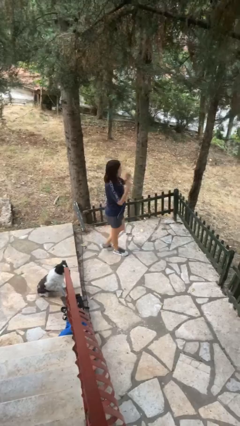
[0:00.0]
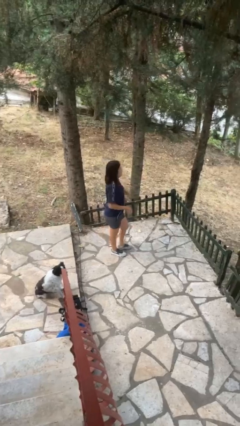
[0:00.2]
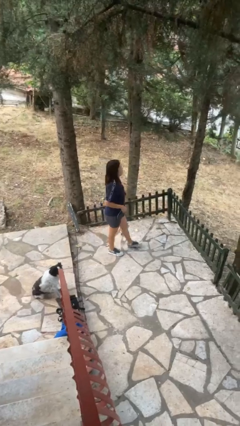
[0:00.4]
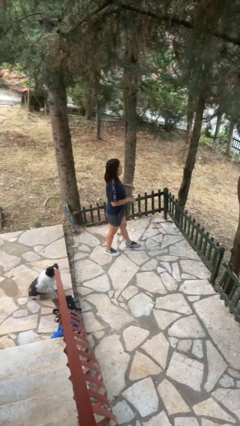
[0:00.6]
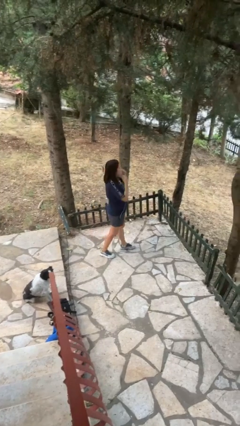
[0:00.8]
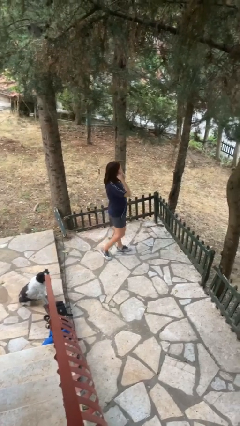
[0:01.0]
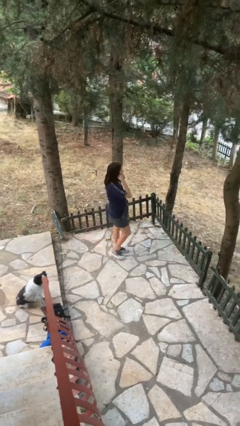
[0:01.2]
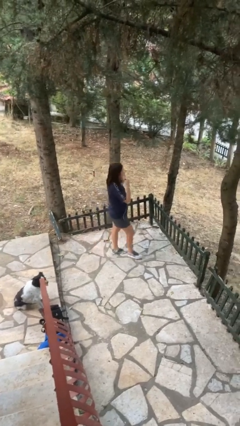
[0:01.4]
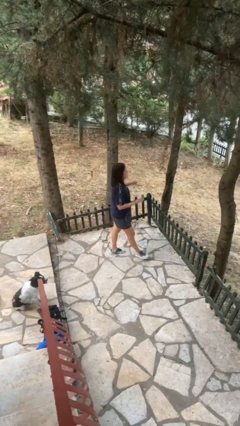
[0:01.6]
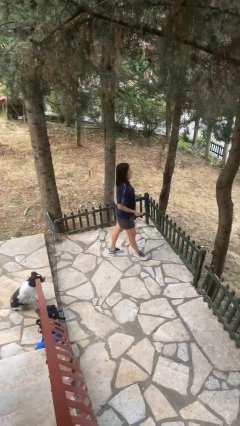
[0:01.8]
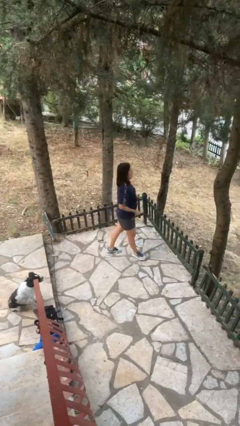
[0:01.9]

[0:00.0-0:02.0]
person takes off headphones

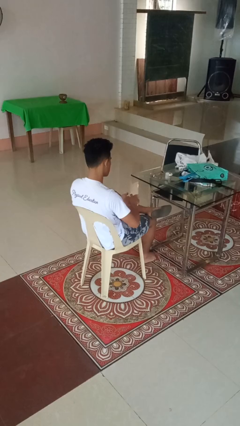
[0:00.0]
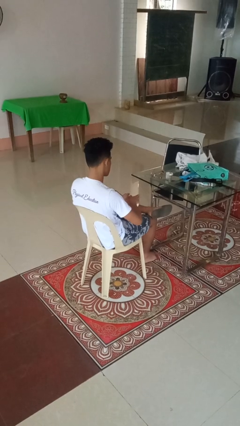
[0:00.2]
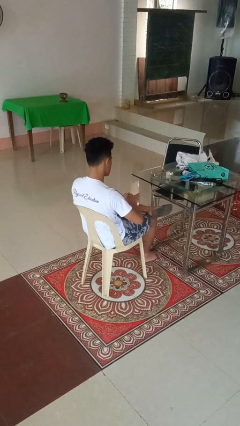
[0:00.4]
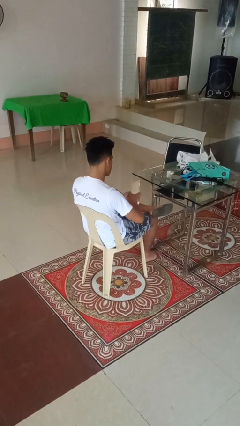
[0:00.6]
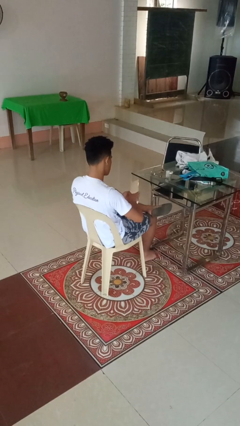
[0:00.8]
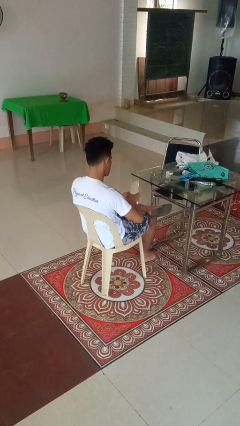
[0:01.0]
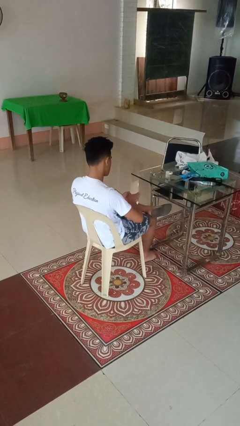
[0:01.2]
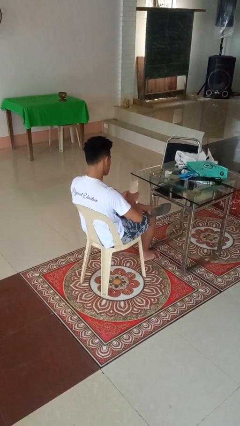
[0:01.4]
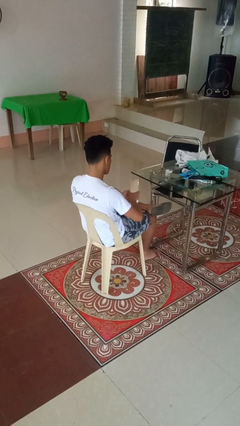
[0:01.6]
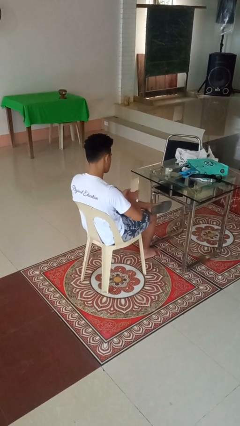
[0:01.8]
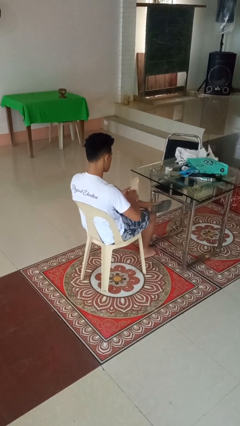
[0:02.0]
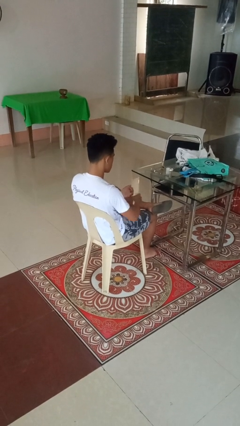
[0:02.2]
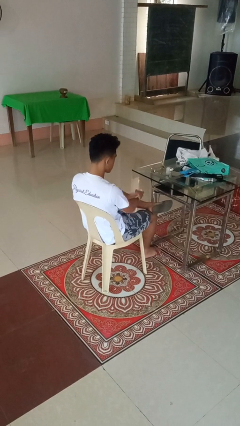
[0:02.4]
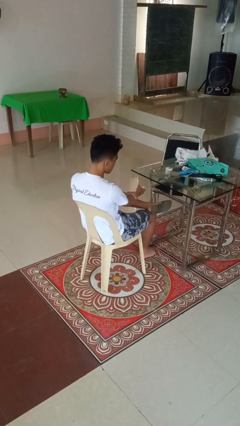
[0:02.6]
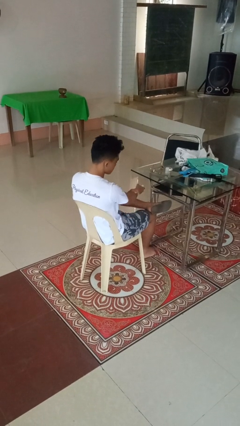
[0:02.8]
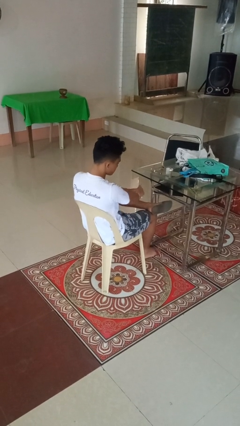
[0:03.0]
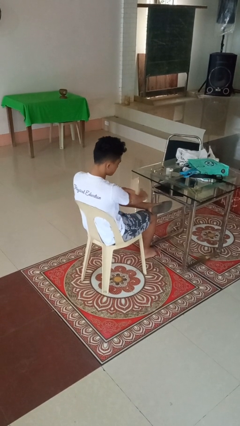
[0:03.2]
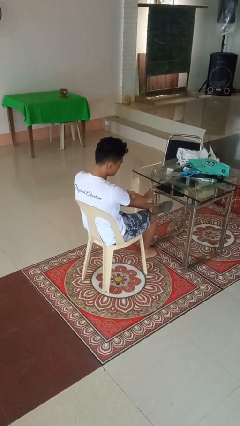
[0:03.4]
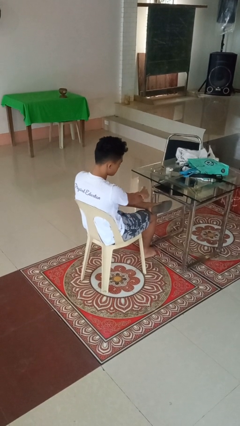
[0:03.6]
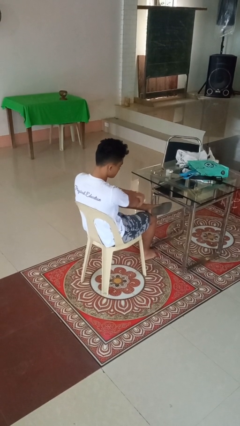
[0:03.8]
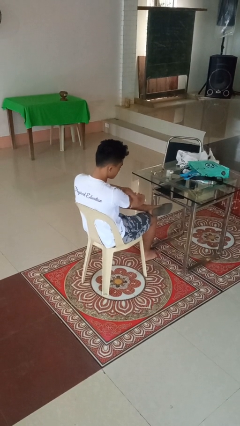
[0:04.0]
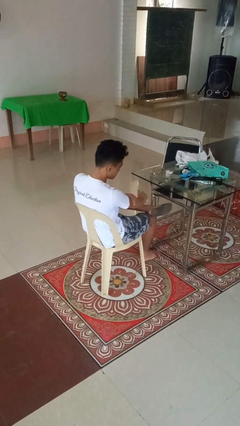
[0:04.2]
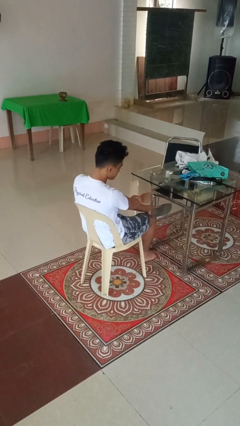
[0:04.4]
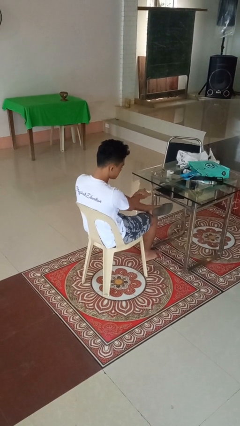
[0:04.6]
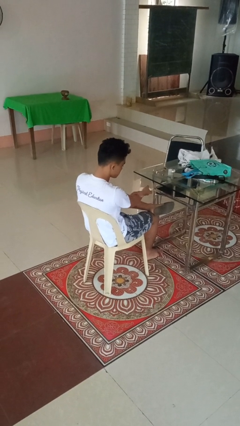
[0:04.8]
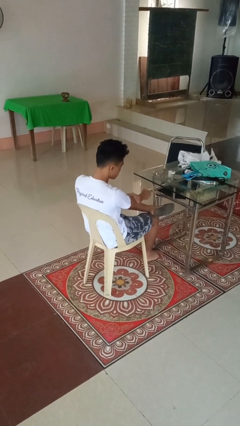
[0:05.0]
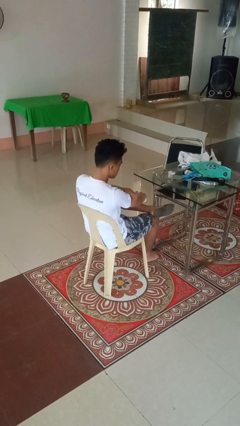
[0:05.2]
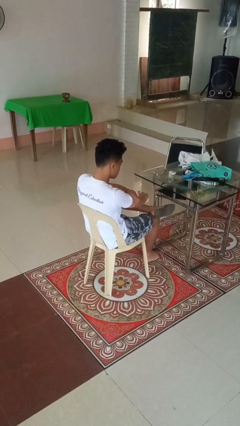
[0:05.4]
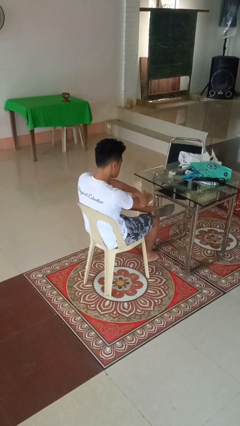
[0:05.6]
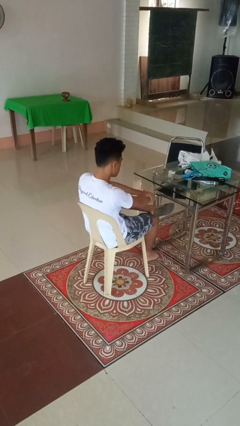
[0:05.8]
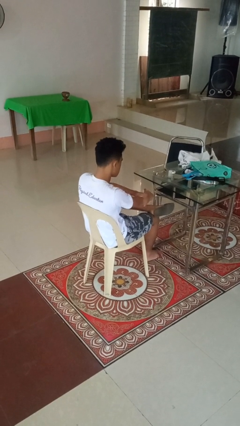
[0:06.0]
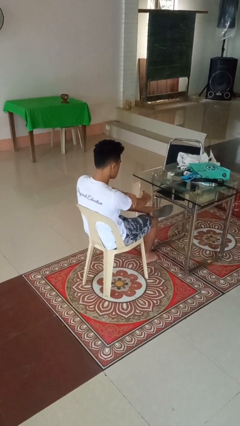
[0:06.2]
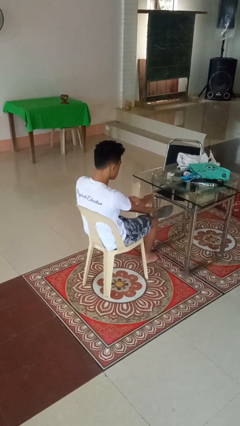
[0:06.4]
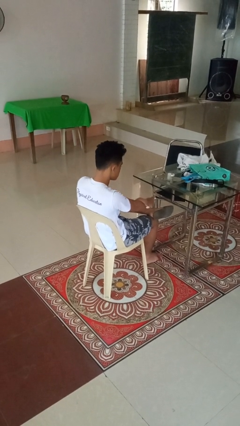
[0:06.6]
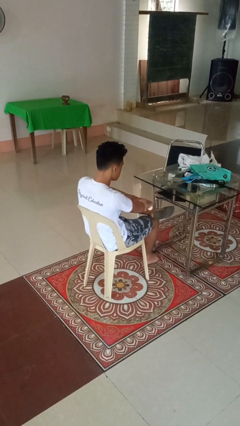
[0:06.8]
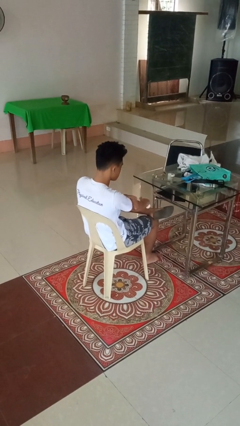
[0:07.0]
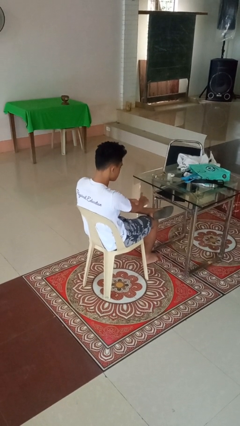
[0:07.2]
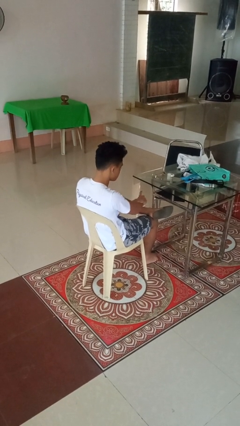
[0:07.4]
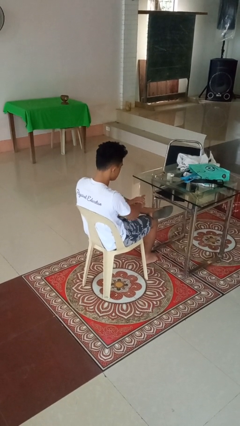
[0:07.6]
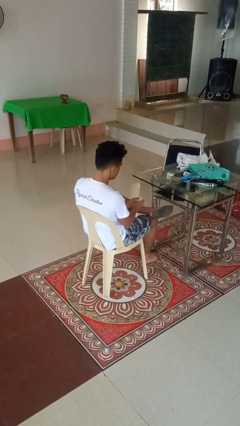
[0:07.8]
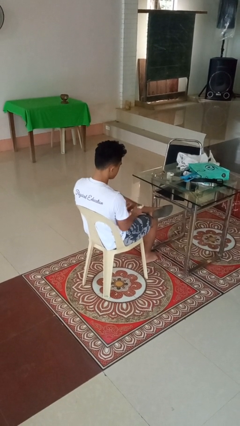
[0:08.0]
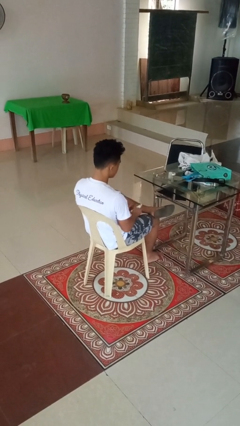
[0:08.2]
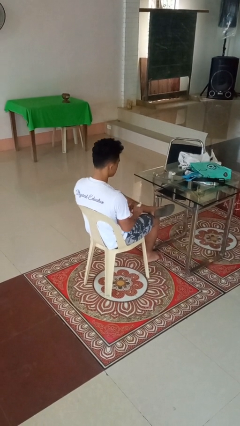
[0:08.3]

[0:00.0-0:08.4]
person applies sunscreen

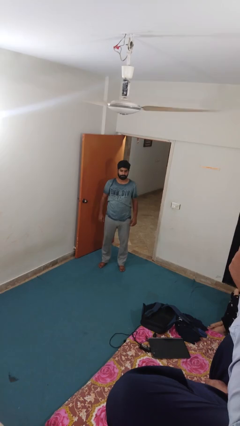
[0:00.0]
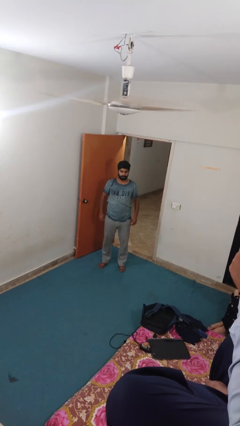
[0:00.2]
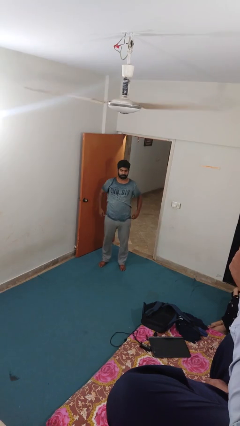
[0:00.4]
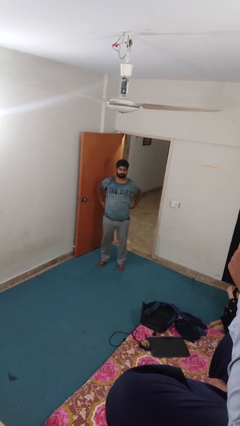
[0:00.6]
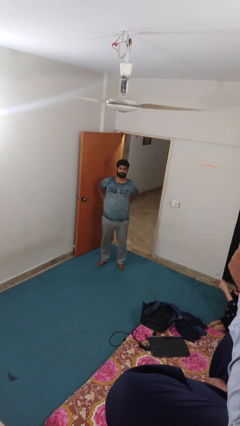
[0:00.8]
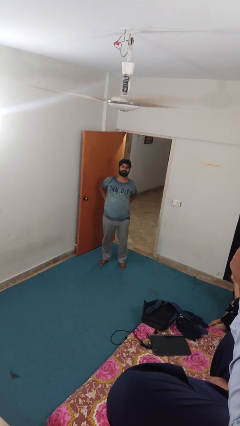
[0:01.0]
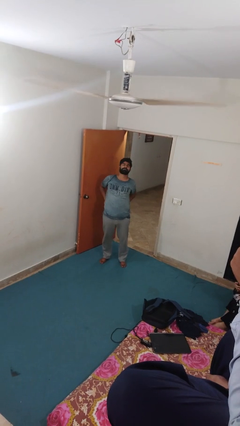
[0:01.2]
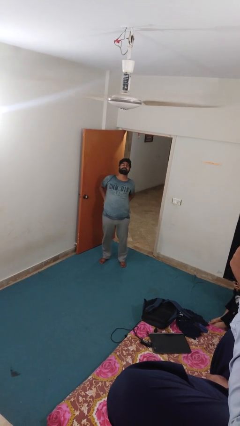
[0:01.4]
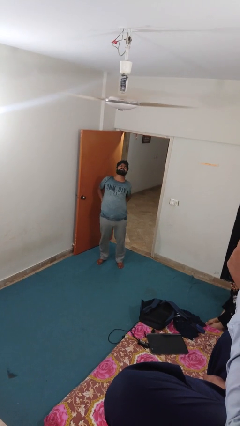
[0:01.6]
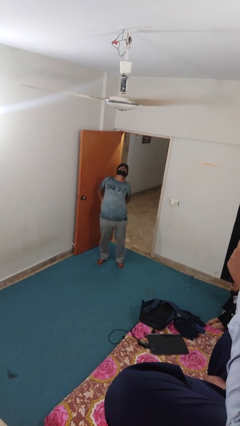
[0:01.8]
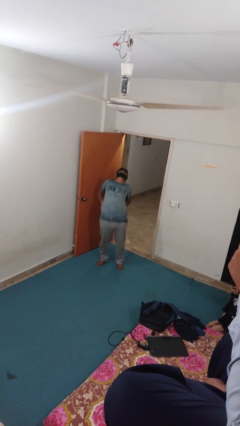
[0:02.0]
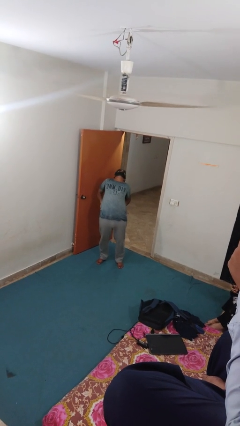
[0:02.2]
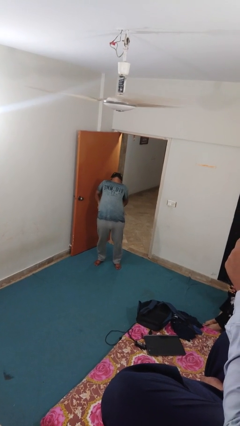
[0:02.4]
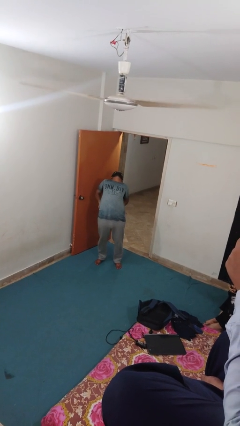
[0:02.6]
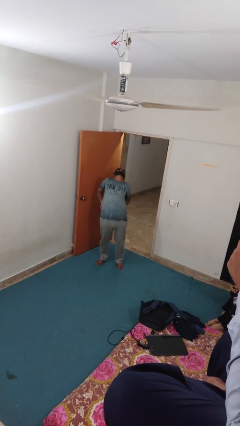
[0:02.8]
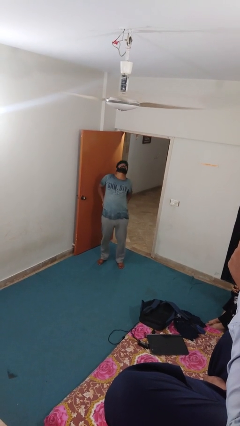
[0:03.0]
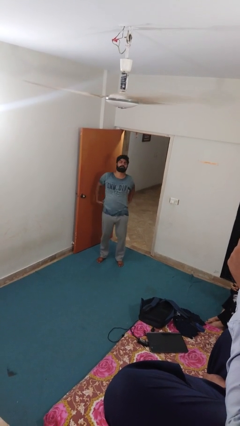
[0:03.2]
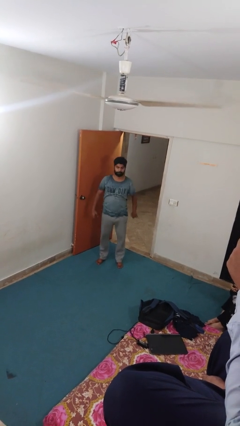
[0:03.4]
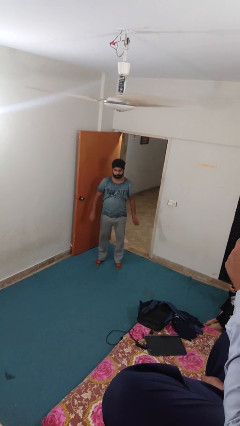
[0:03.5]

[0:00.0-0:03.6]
person stretches back

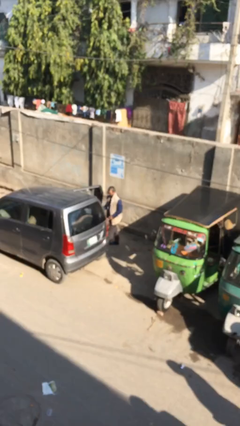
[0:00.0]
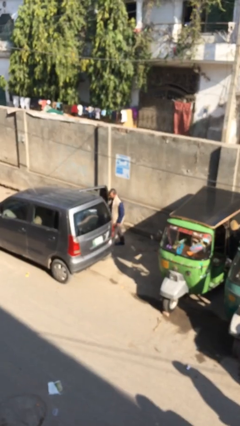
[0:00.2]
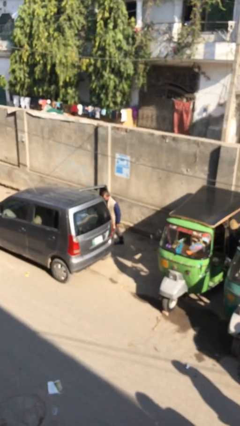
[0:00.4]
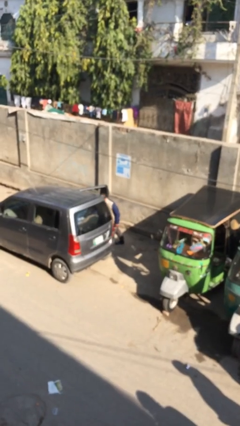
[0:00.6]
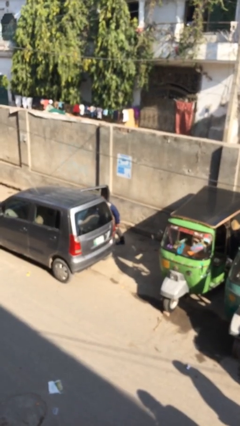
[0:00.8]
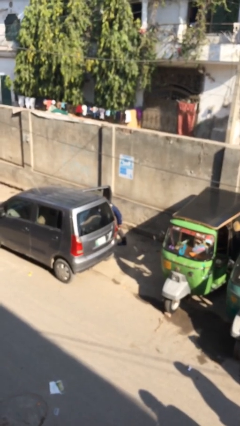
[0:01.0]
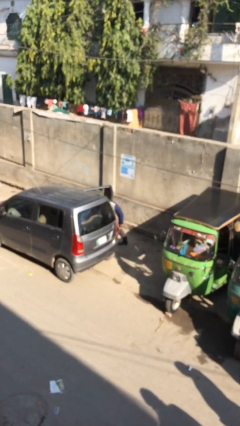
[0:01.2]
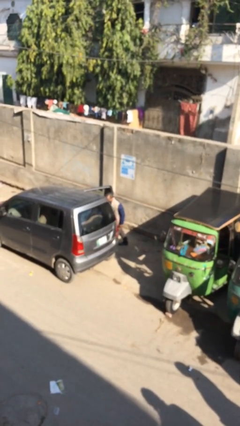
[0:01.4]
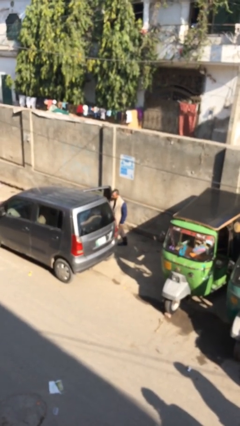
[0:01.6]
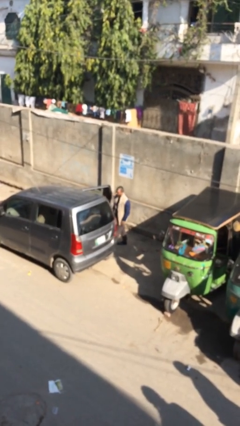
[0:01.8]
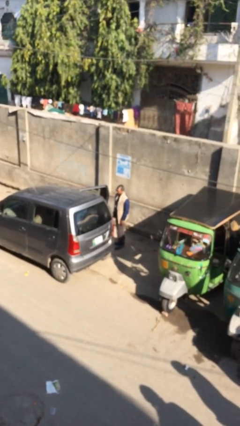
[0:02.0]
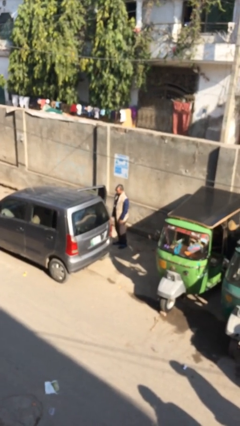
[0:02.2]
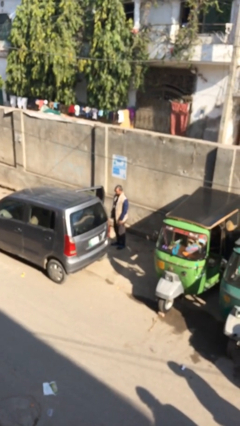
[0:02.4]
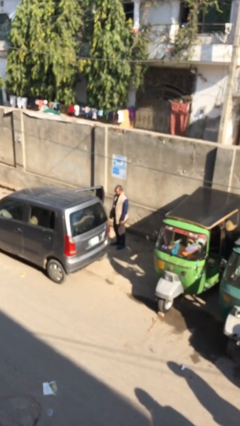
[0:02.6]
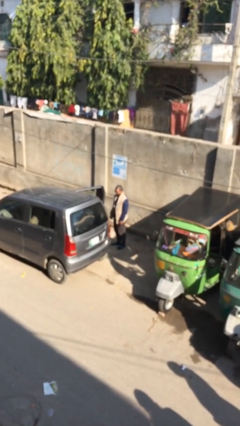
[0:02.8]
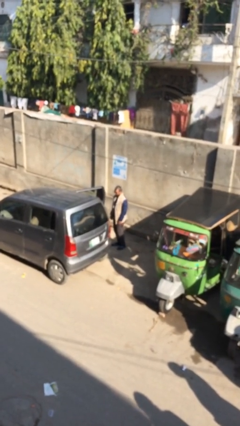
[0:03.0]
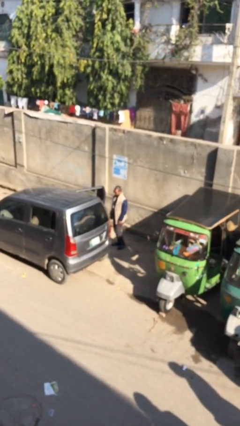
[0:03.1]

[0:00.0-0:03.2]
person loads car

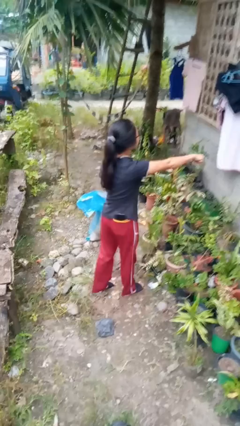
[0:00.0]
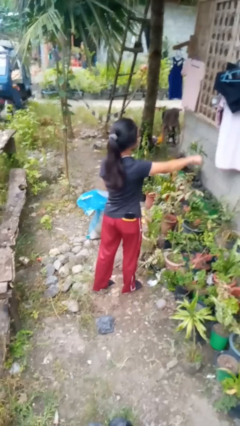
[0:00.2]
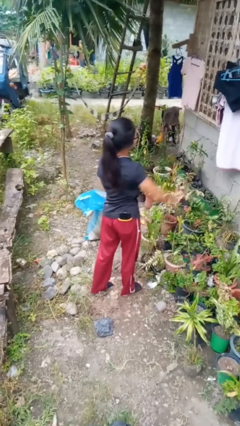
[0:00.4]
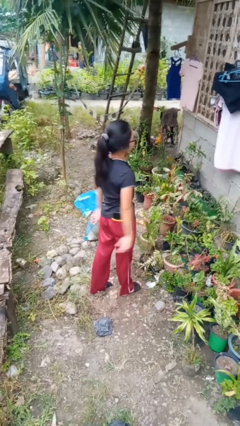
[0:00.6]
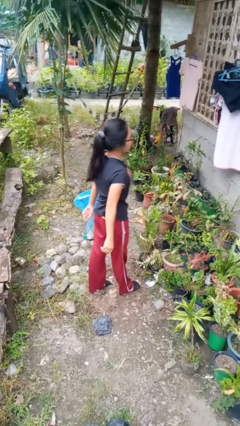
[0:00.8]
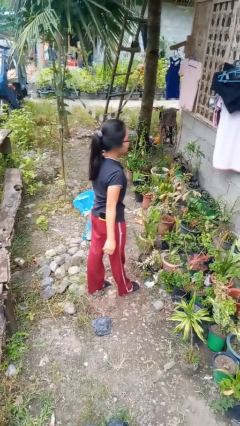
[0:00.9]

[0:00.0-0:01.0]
person punches
